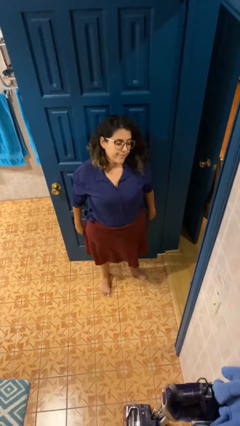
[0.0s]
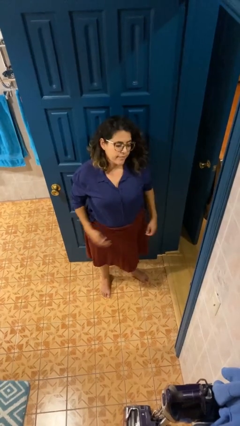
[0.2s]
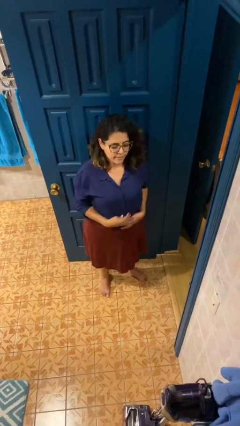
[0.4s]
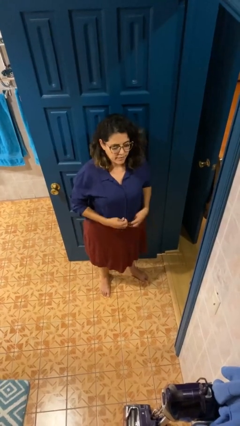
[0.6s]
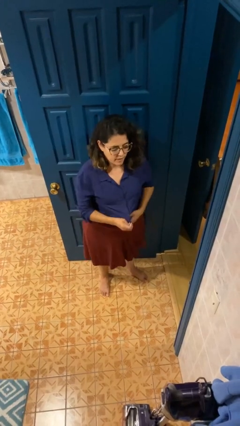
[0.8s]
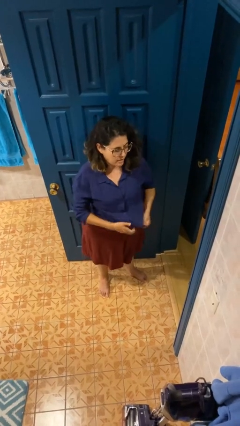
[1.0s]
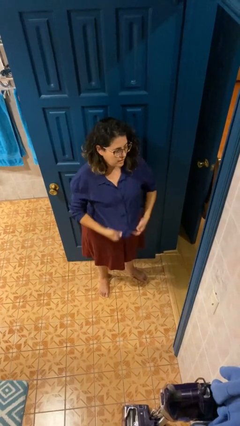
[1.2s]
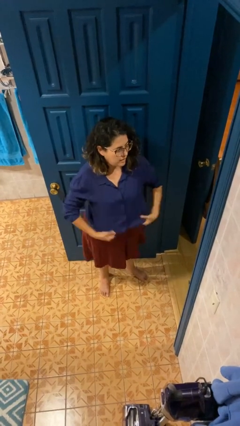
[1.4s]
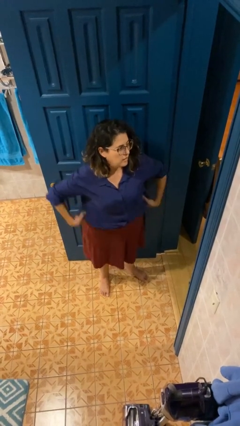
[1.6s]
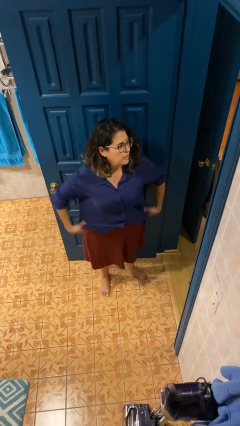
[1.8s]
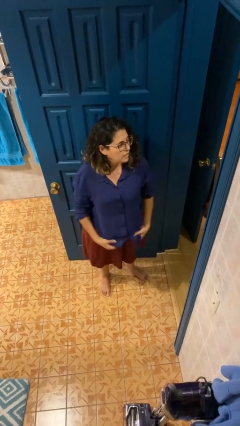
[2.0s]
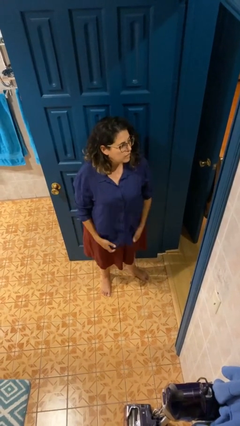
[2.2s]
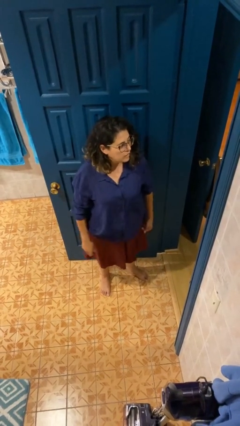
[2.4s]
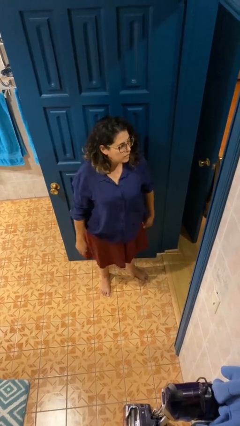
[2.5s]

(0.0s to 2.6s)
person untucks shirt

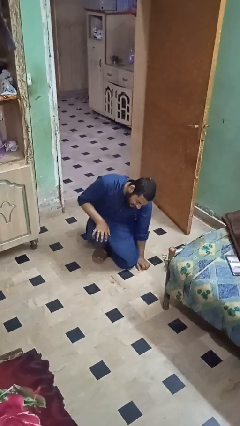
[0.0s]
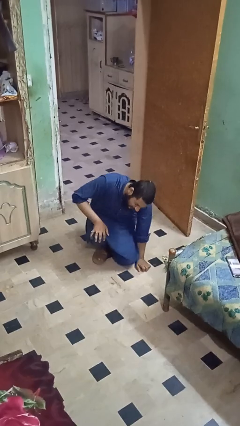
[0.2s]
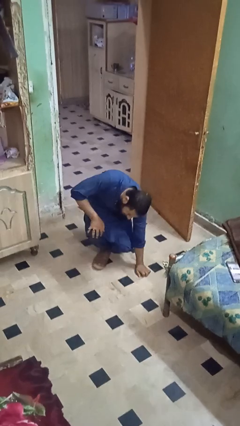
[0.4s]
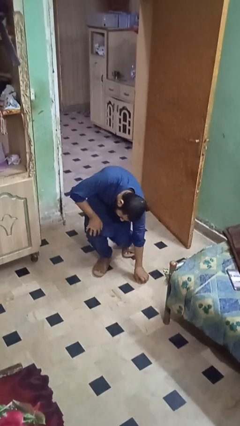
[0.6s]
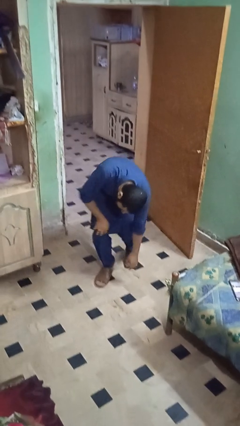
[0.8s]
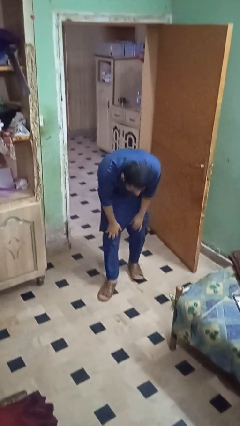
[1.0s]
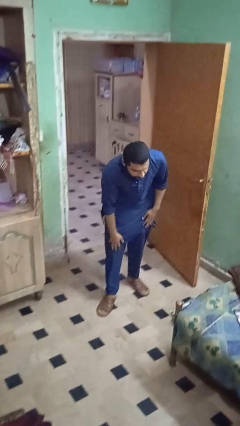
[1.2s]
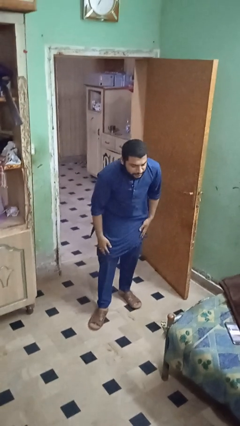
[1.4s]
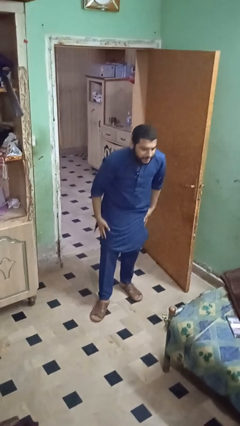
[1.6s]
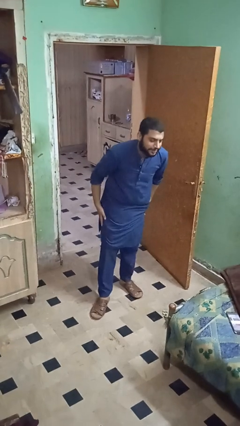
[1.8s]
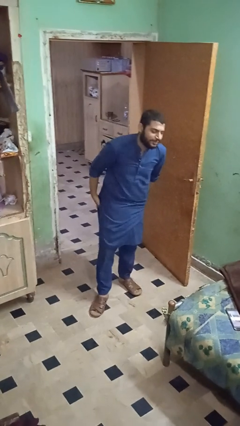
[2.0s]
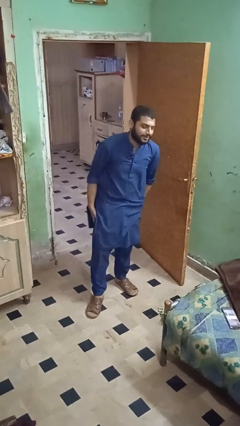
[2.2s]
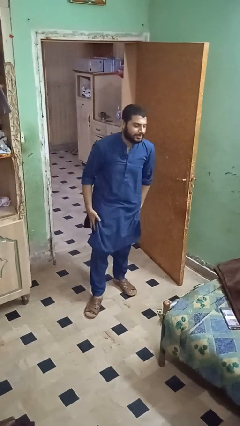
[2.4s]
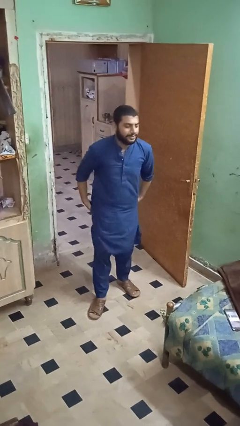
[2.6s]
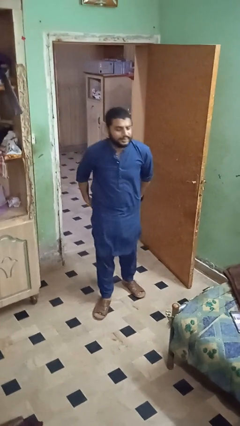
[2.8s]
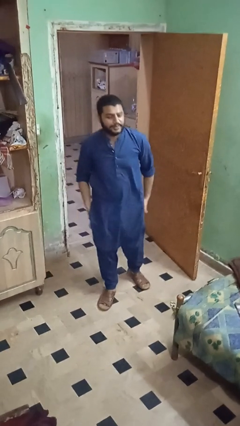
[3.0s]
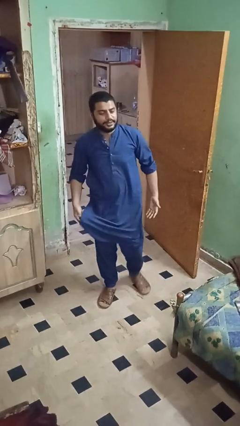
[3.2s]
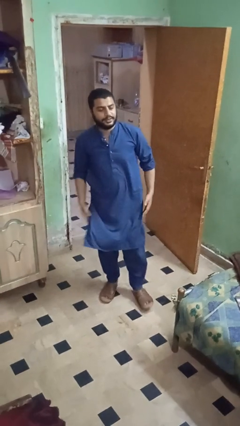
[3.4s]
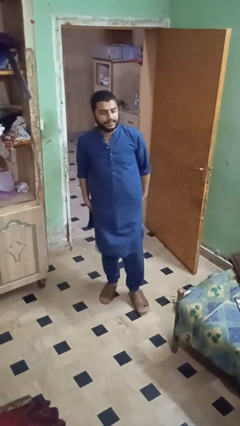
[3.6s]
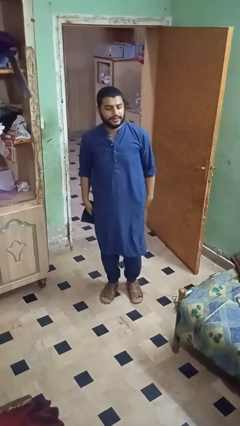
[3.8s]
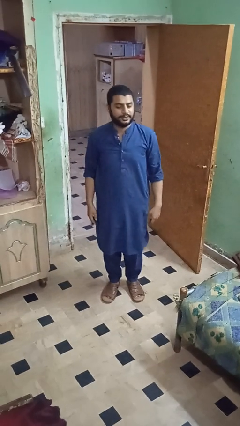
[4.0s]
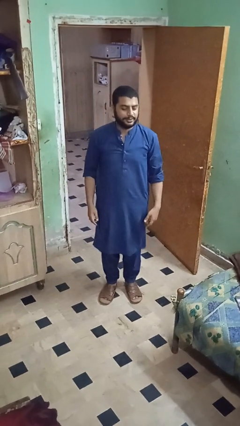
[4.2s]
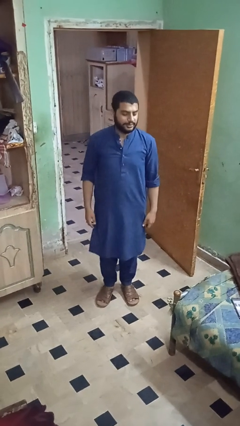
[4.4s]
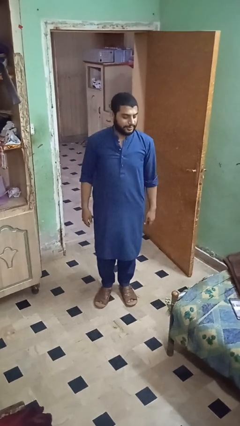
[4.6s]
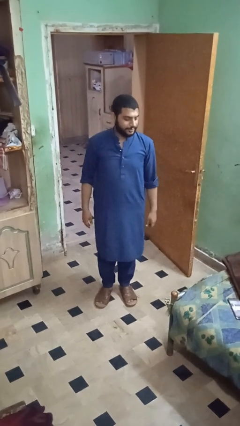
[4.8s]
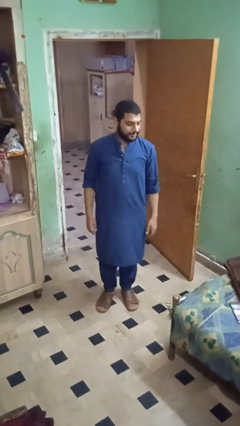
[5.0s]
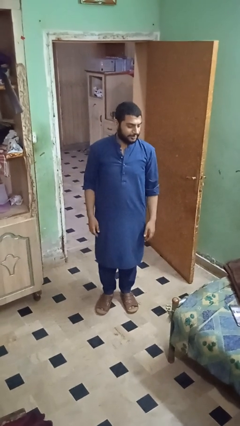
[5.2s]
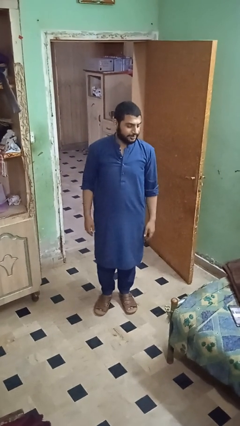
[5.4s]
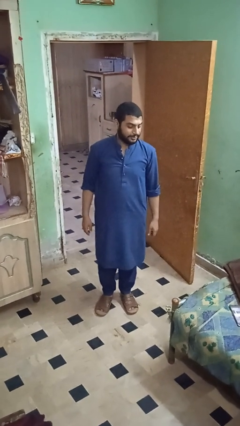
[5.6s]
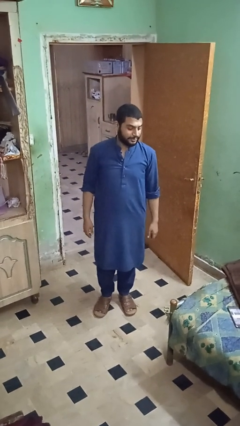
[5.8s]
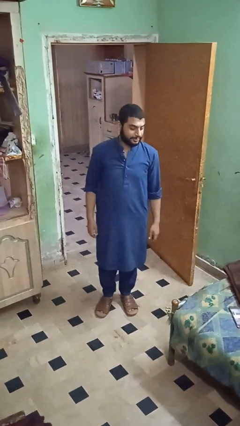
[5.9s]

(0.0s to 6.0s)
person stands up from floor

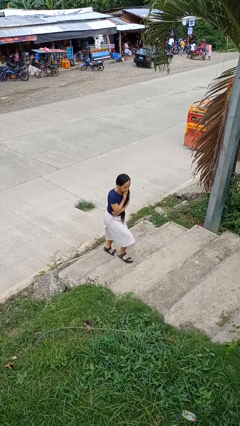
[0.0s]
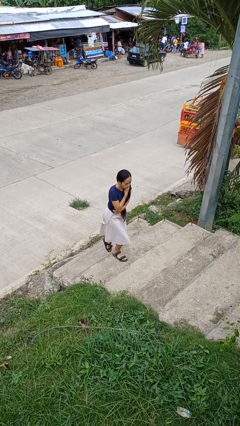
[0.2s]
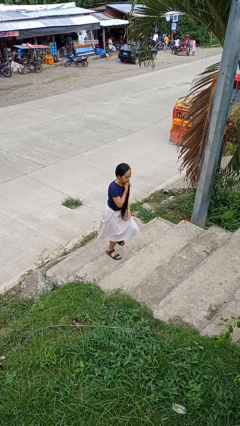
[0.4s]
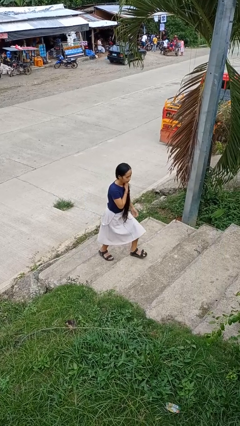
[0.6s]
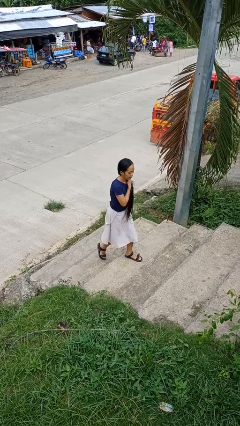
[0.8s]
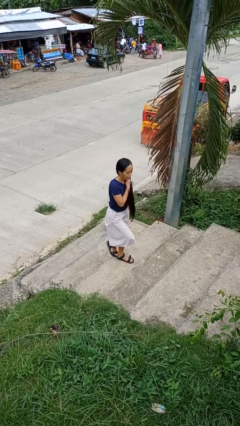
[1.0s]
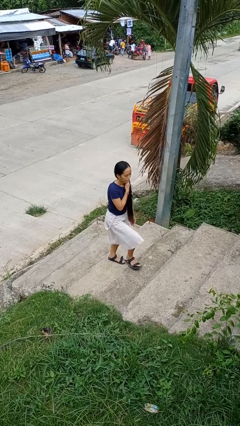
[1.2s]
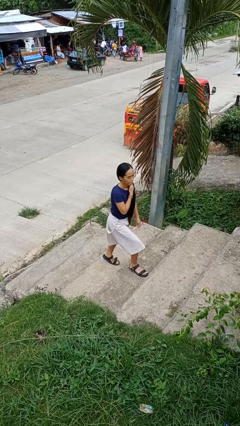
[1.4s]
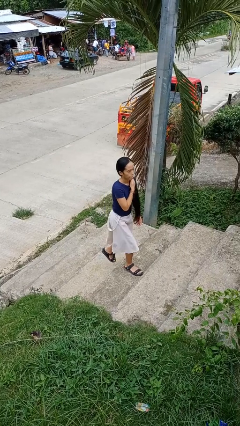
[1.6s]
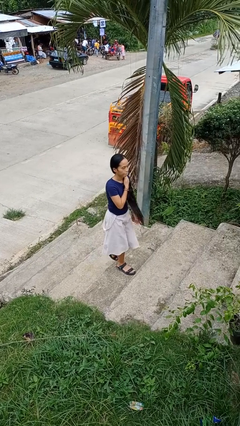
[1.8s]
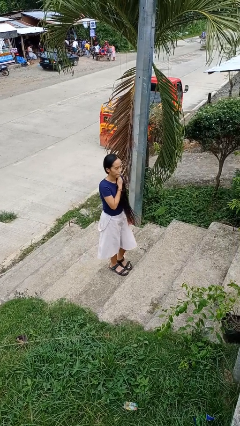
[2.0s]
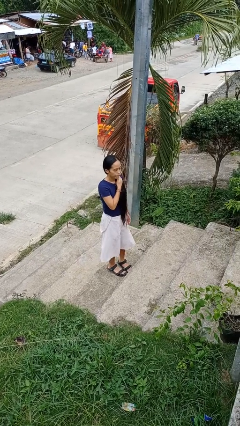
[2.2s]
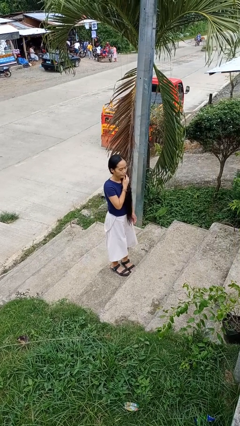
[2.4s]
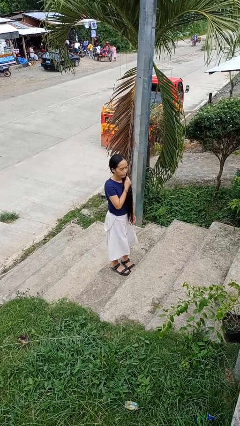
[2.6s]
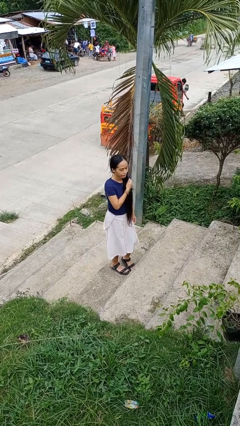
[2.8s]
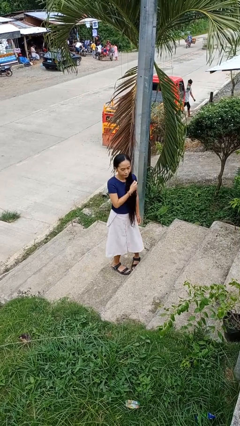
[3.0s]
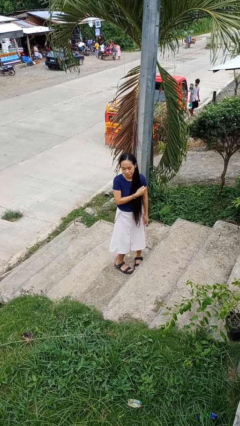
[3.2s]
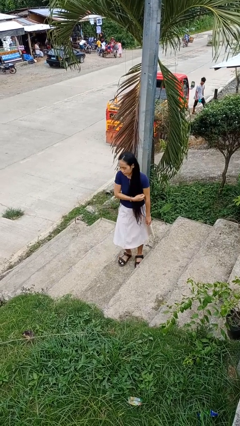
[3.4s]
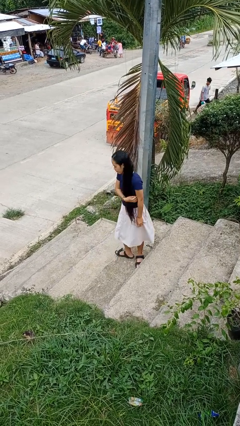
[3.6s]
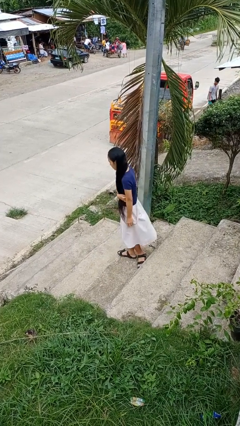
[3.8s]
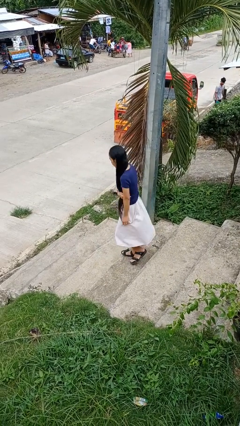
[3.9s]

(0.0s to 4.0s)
person climbs up stairs

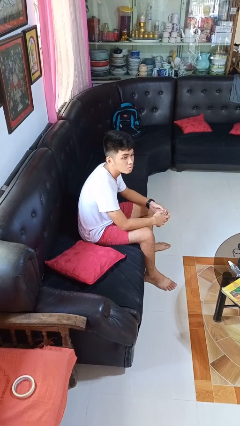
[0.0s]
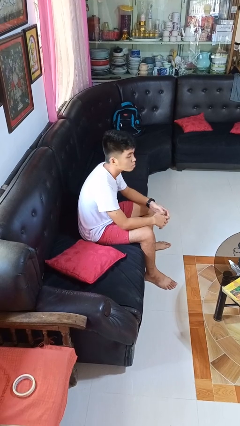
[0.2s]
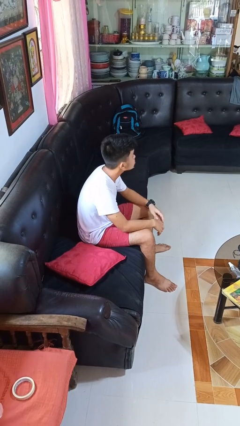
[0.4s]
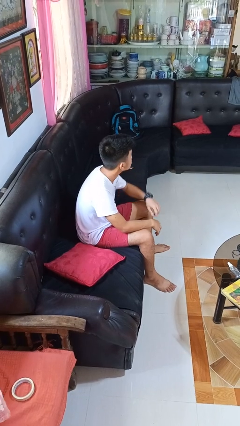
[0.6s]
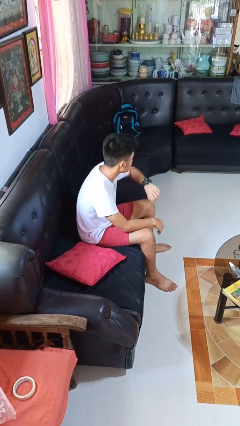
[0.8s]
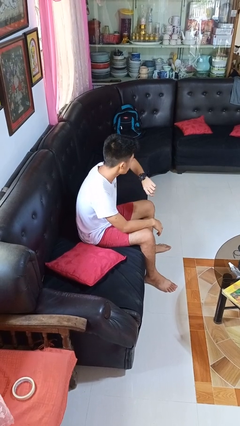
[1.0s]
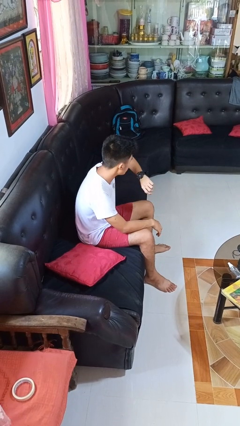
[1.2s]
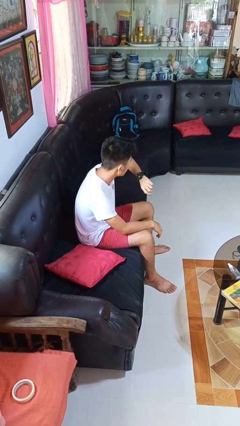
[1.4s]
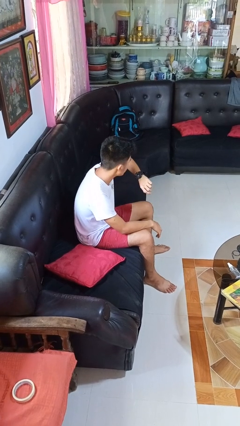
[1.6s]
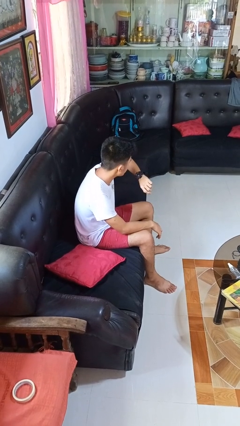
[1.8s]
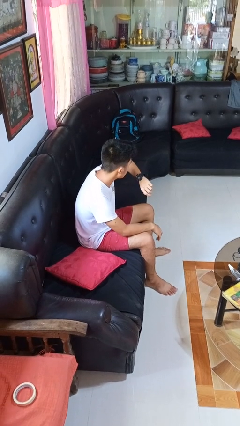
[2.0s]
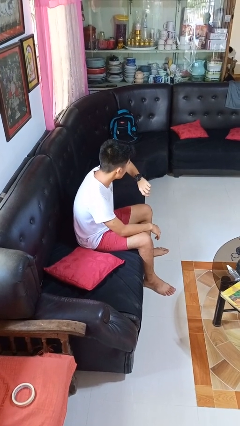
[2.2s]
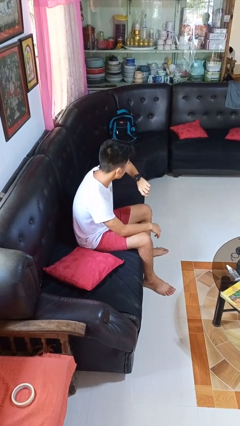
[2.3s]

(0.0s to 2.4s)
person looks at wristwatch

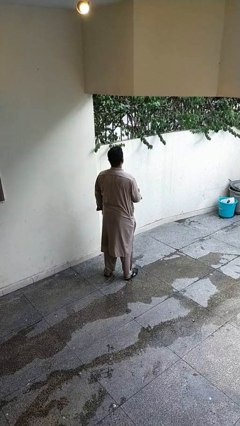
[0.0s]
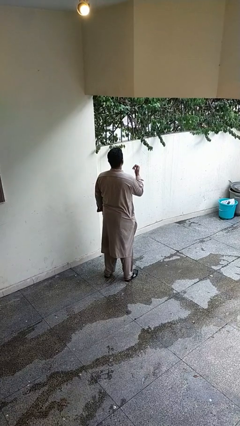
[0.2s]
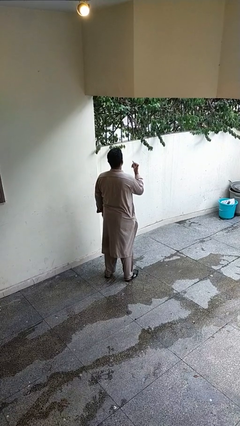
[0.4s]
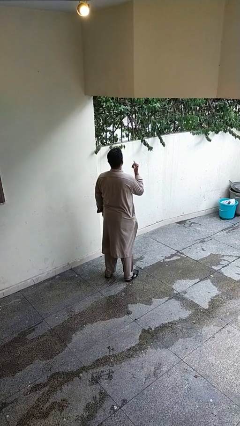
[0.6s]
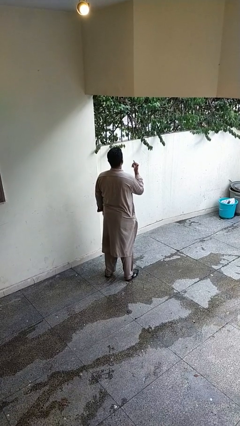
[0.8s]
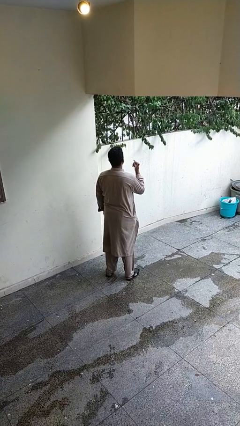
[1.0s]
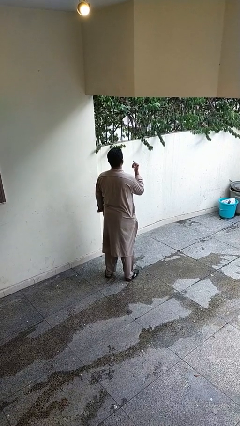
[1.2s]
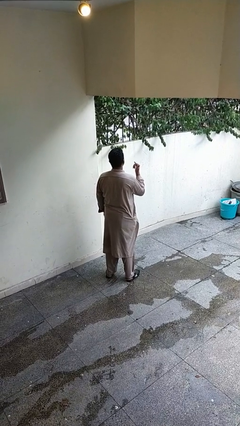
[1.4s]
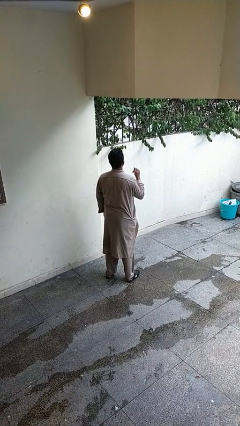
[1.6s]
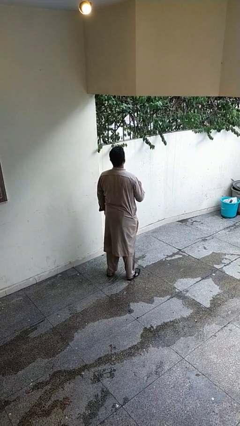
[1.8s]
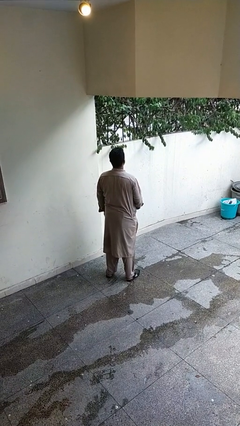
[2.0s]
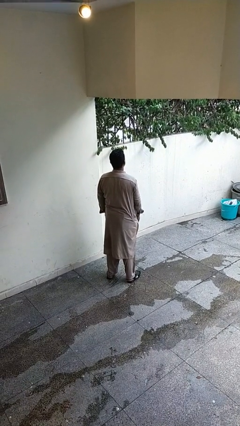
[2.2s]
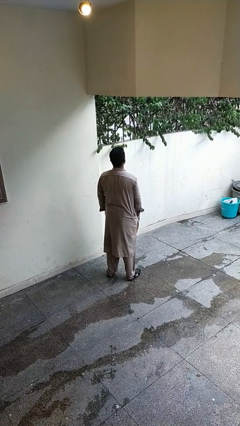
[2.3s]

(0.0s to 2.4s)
person gestures hang loose

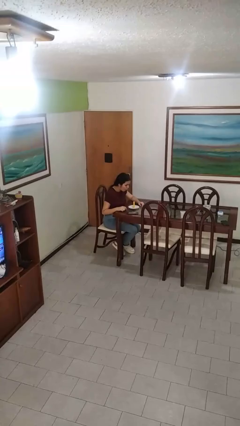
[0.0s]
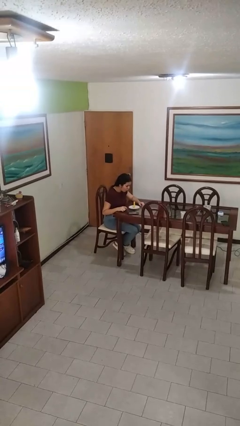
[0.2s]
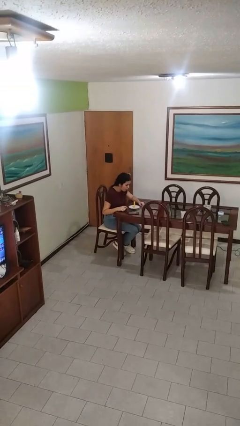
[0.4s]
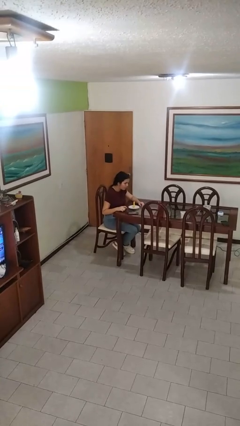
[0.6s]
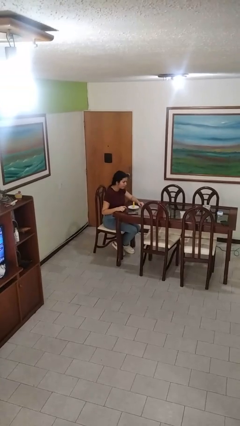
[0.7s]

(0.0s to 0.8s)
person extinguishes candle
